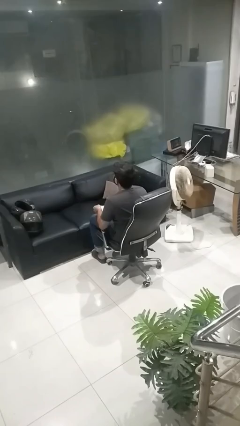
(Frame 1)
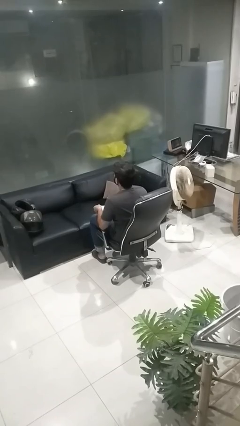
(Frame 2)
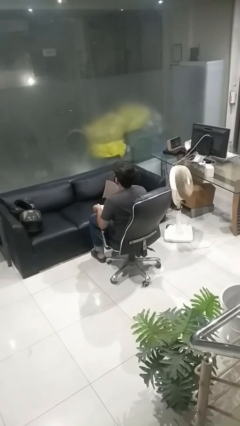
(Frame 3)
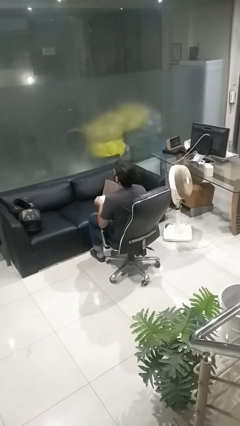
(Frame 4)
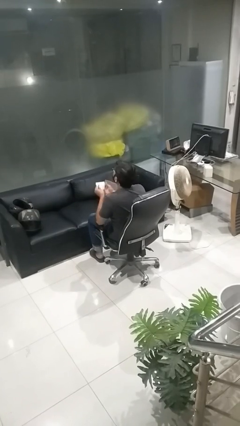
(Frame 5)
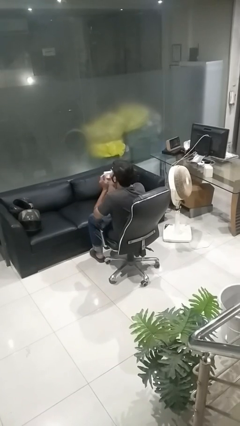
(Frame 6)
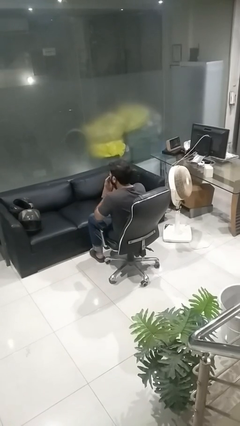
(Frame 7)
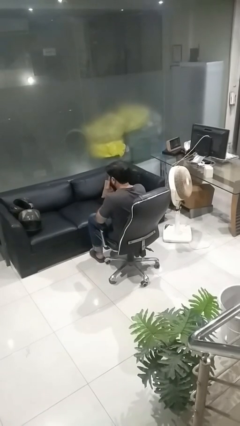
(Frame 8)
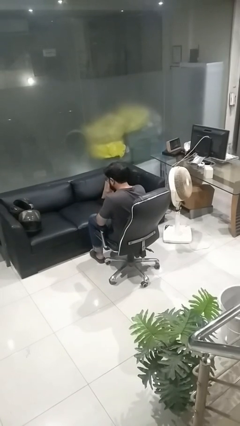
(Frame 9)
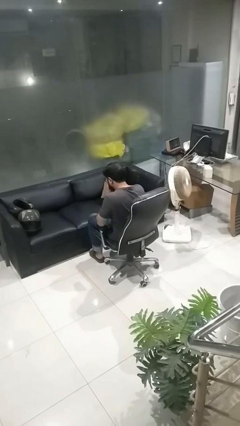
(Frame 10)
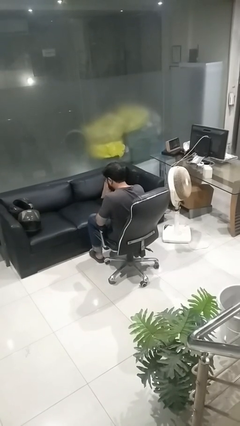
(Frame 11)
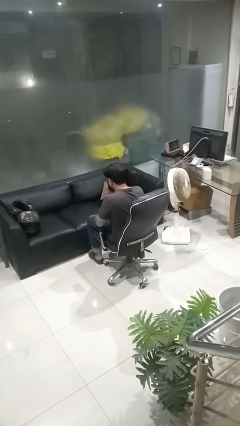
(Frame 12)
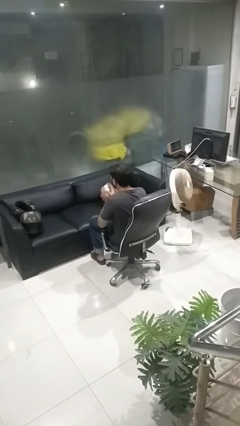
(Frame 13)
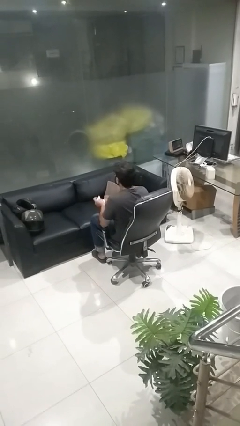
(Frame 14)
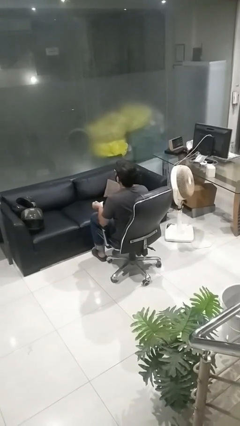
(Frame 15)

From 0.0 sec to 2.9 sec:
person blows nose

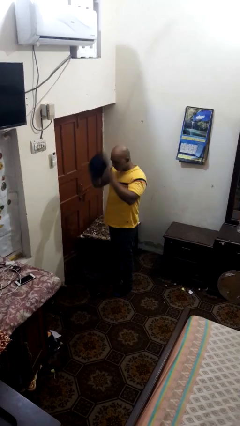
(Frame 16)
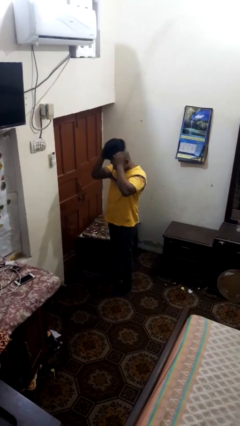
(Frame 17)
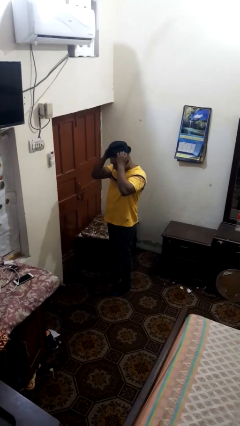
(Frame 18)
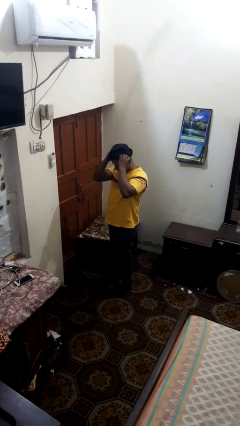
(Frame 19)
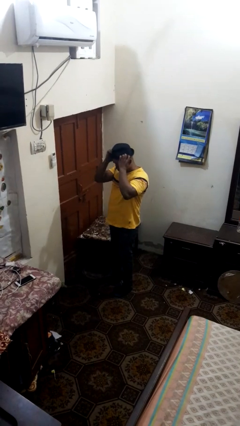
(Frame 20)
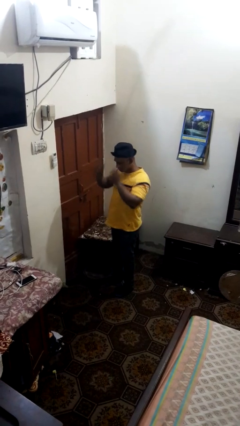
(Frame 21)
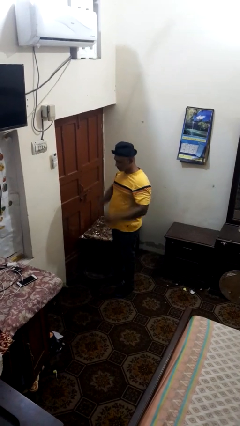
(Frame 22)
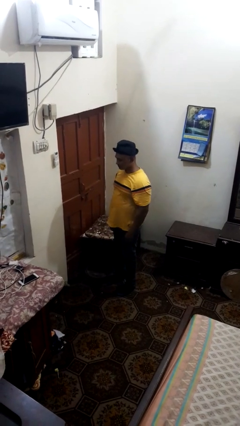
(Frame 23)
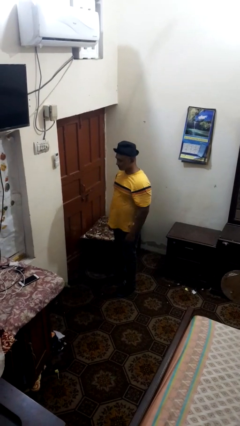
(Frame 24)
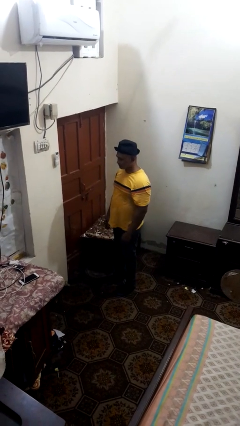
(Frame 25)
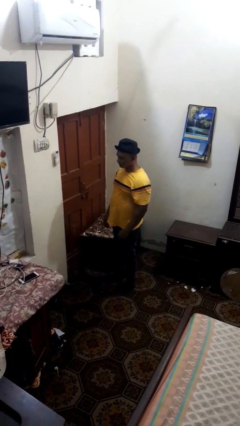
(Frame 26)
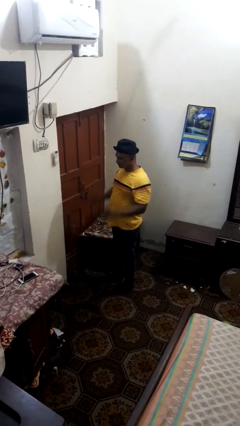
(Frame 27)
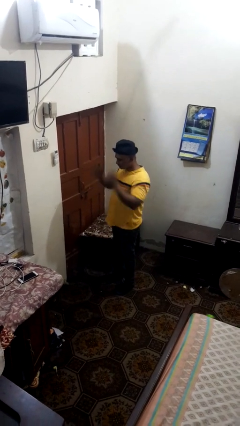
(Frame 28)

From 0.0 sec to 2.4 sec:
person puts on hat

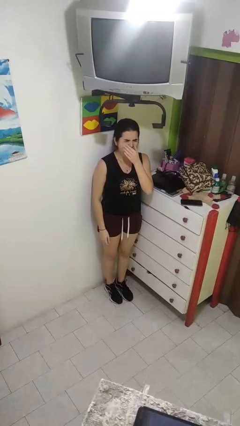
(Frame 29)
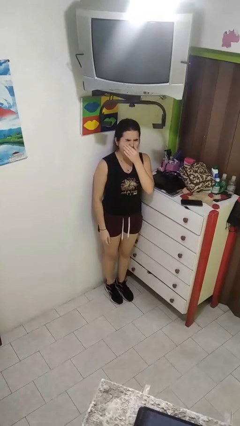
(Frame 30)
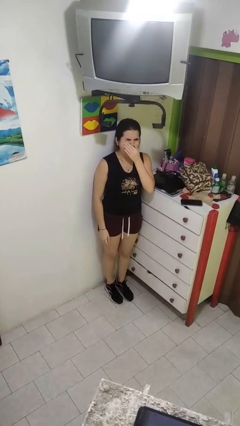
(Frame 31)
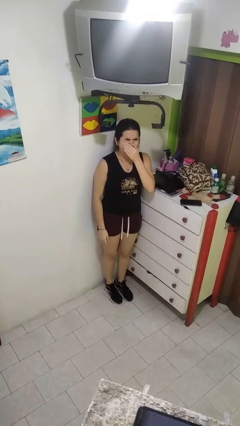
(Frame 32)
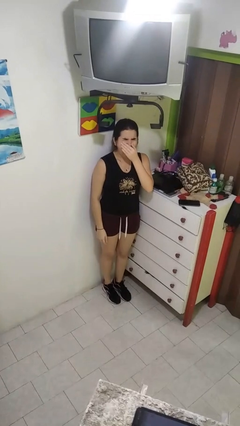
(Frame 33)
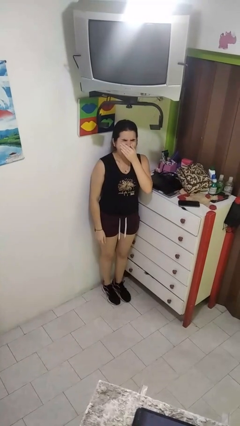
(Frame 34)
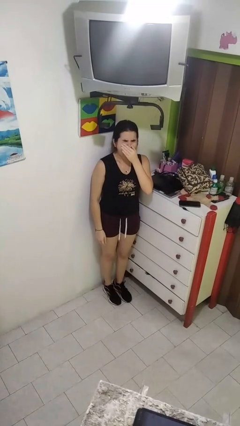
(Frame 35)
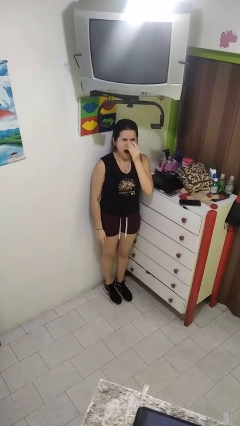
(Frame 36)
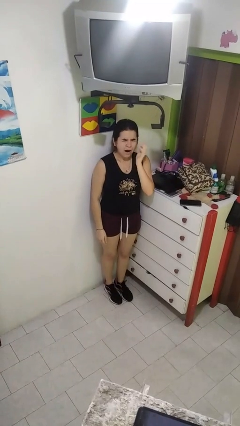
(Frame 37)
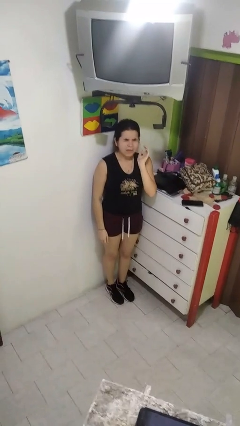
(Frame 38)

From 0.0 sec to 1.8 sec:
person yawns

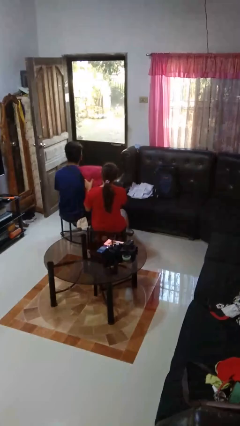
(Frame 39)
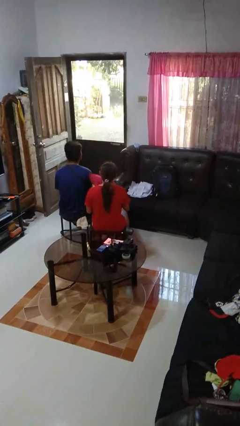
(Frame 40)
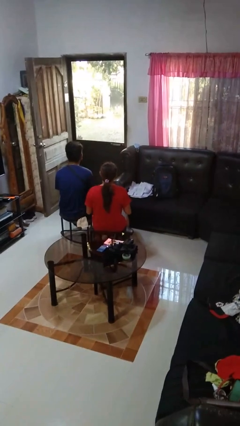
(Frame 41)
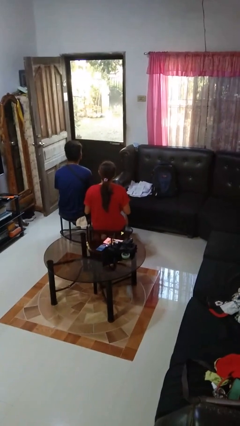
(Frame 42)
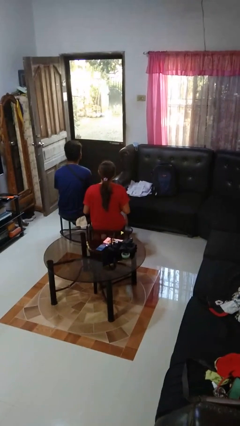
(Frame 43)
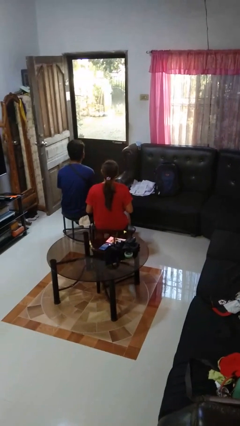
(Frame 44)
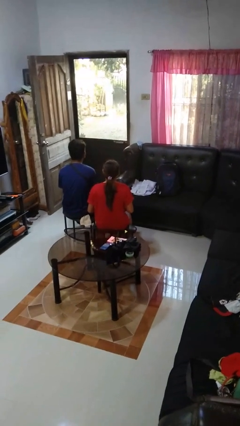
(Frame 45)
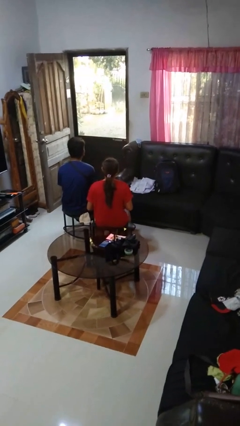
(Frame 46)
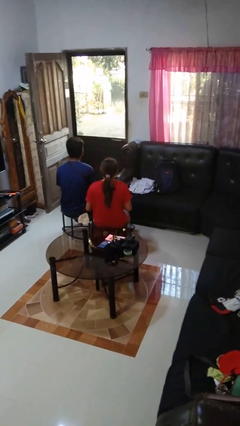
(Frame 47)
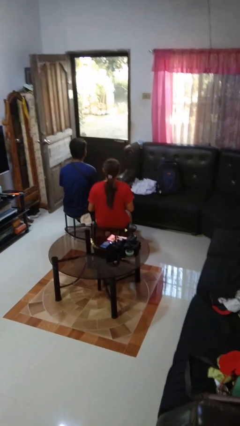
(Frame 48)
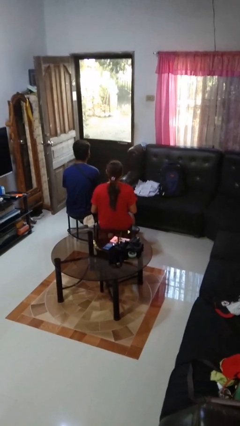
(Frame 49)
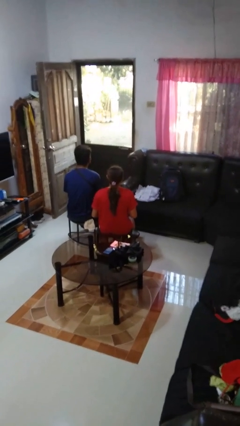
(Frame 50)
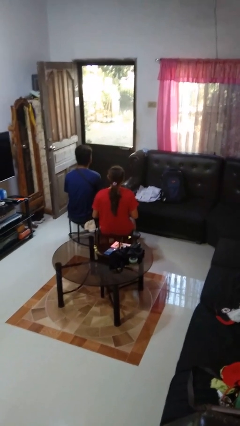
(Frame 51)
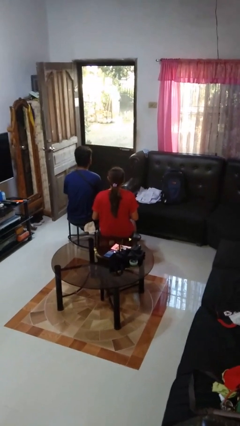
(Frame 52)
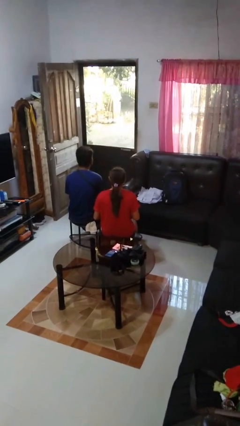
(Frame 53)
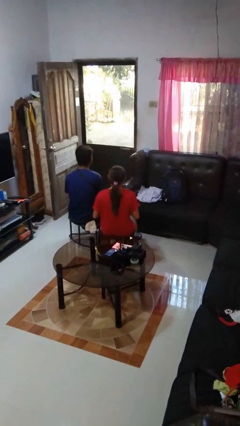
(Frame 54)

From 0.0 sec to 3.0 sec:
person hits person with pillow

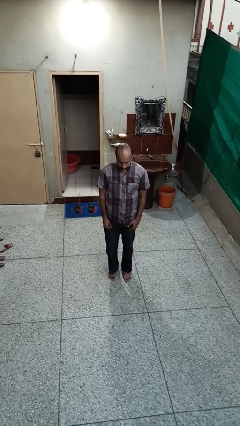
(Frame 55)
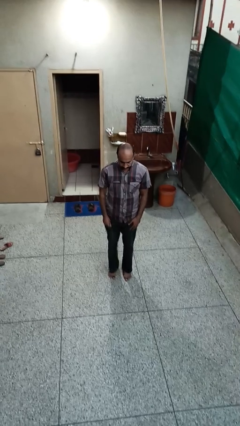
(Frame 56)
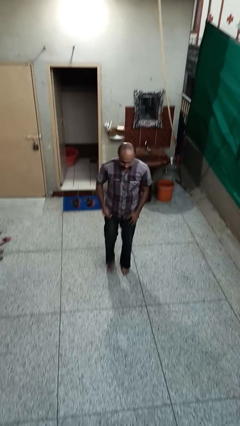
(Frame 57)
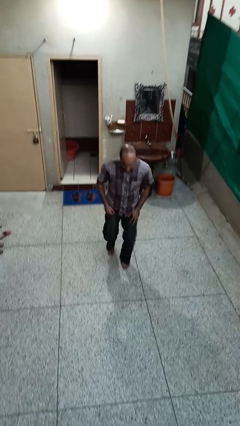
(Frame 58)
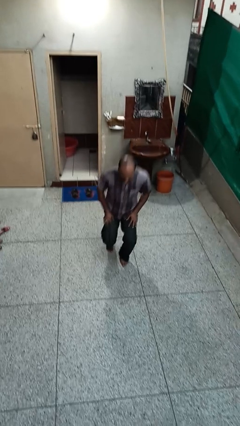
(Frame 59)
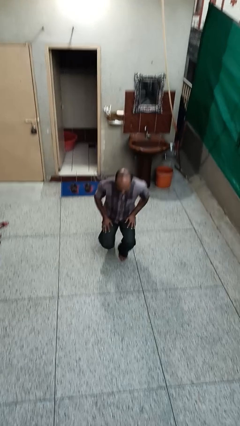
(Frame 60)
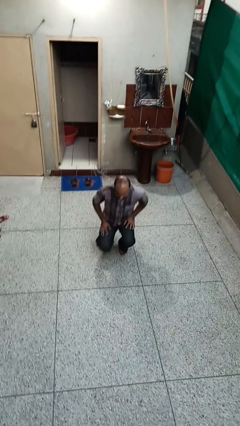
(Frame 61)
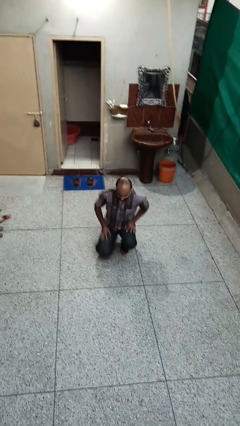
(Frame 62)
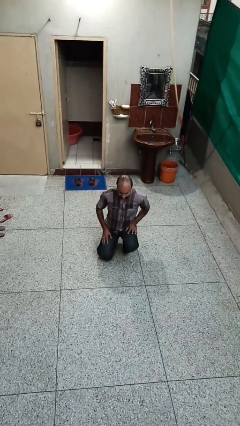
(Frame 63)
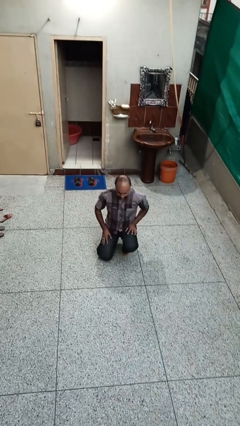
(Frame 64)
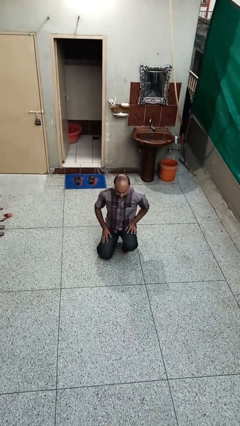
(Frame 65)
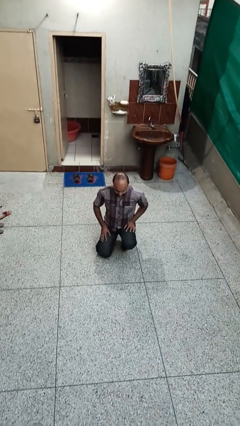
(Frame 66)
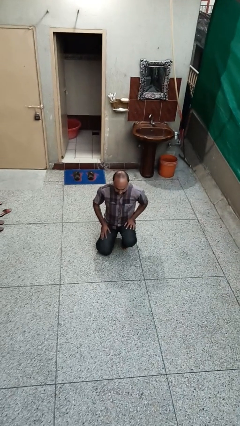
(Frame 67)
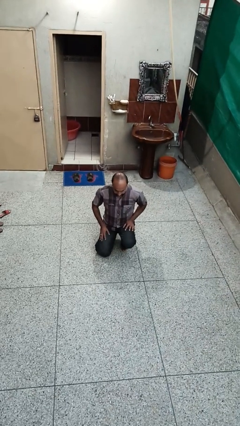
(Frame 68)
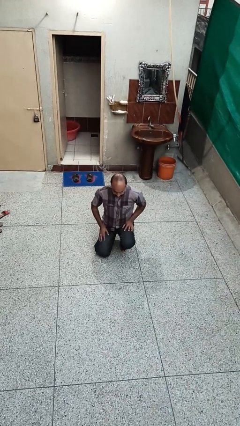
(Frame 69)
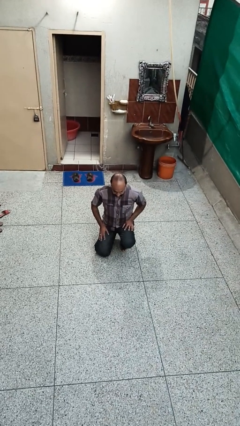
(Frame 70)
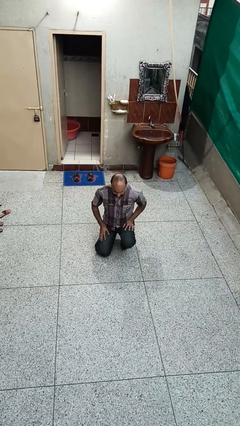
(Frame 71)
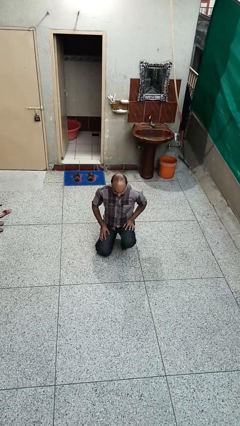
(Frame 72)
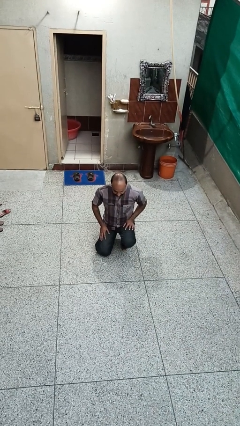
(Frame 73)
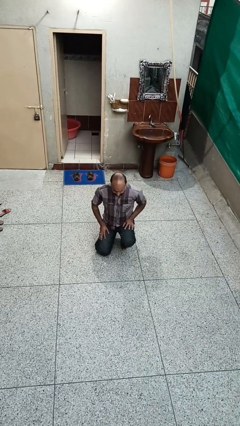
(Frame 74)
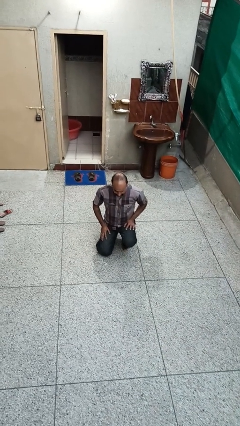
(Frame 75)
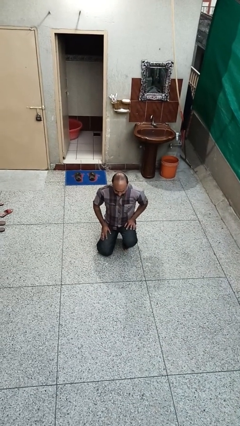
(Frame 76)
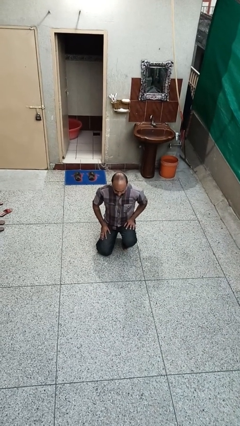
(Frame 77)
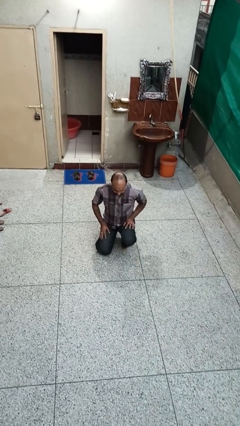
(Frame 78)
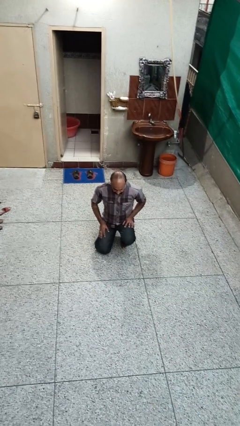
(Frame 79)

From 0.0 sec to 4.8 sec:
person kneels

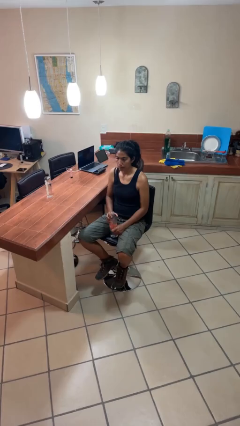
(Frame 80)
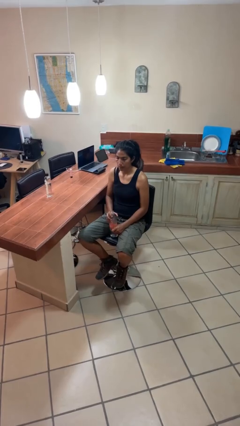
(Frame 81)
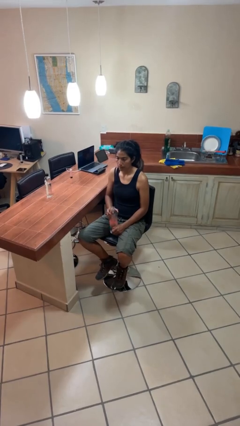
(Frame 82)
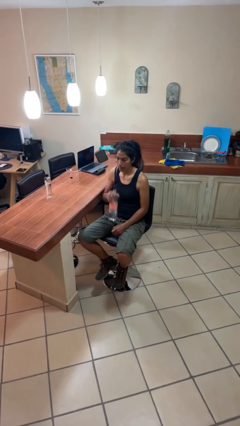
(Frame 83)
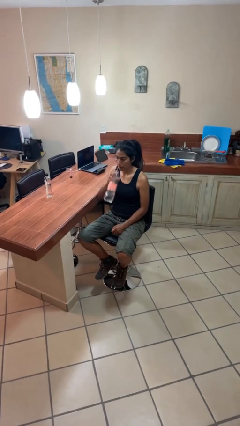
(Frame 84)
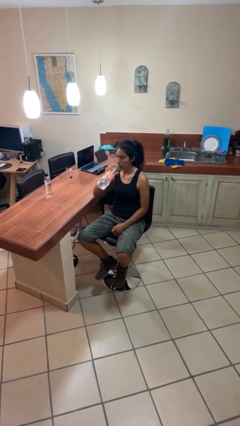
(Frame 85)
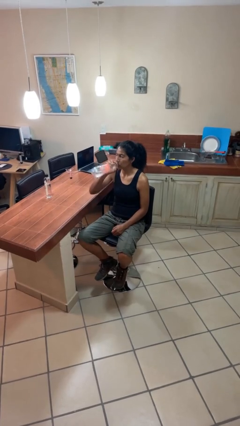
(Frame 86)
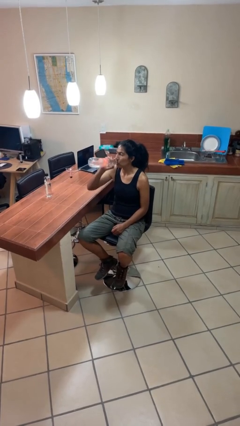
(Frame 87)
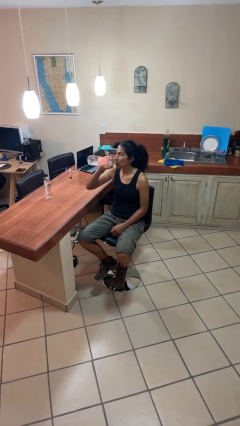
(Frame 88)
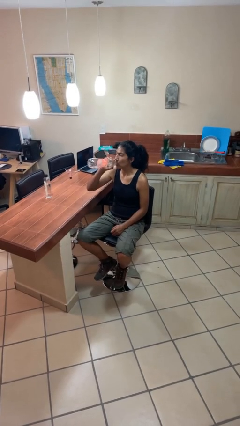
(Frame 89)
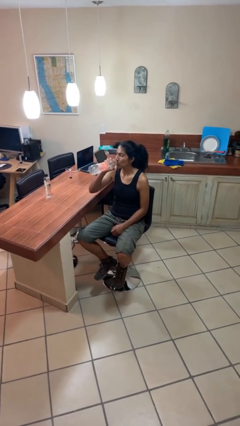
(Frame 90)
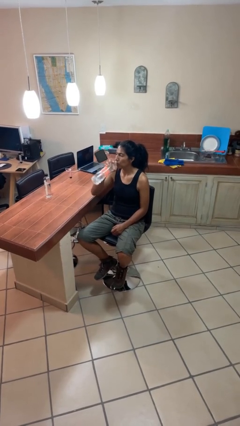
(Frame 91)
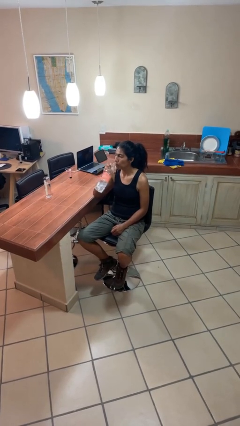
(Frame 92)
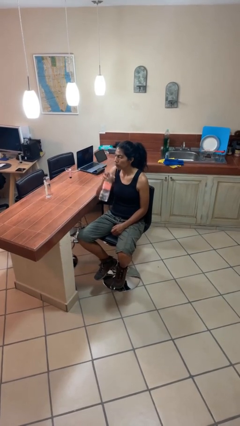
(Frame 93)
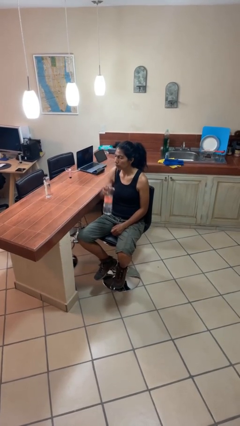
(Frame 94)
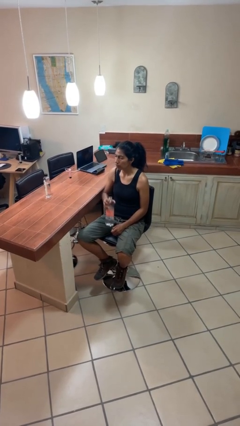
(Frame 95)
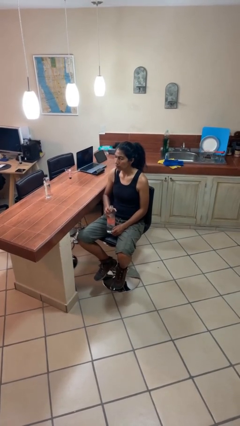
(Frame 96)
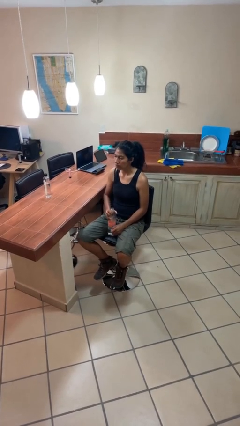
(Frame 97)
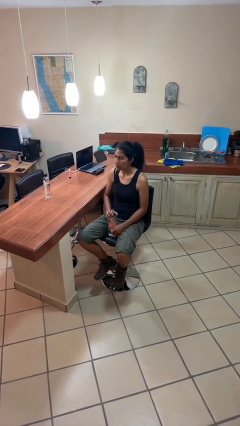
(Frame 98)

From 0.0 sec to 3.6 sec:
person drinks from bottle
